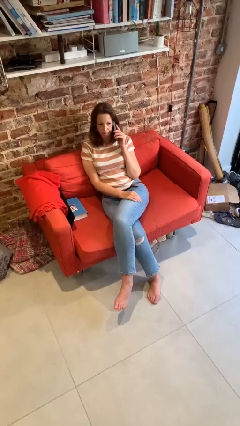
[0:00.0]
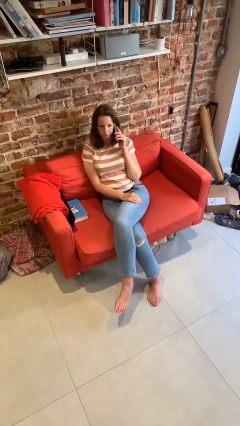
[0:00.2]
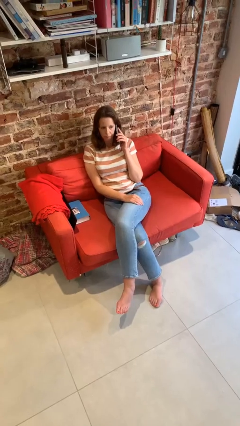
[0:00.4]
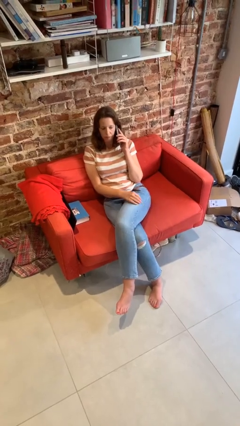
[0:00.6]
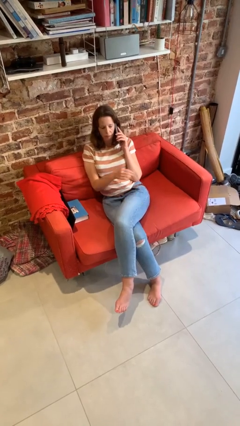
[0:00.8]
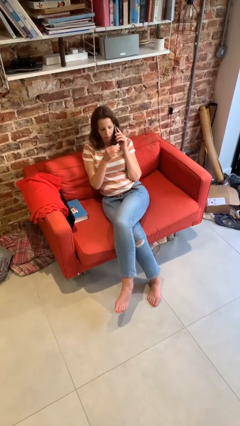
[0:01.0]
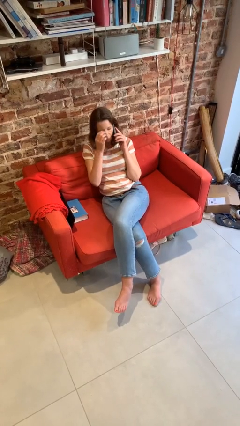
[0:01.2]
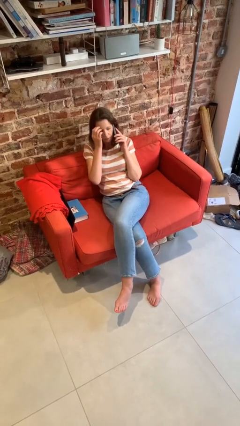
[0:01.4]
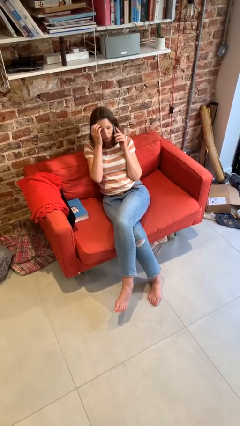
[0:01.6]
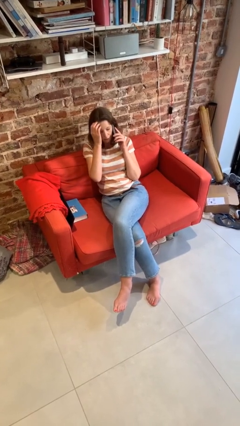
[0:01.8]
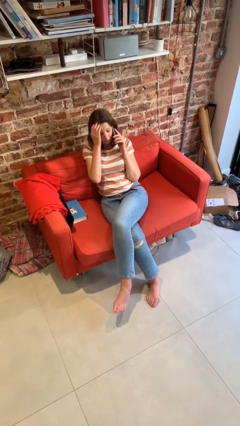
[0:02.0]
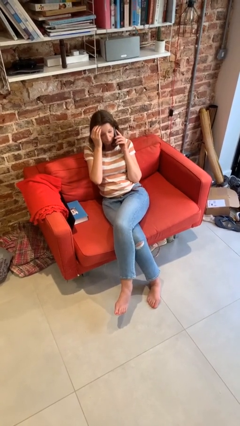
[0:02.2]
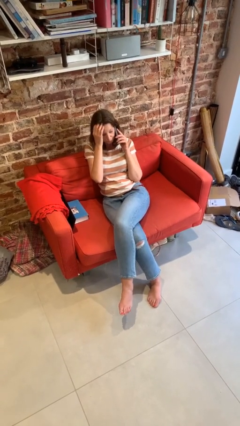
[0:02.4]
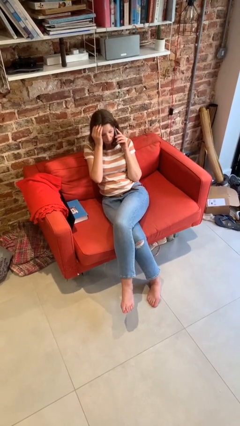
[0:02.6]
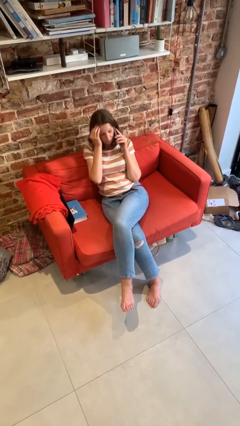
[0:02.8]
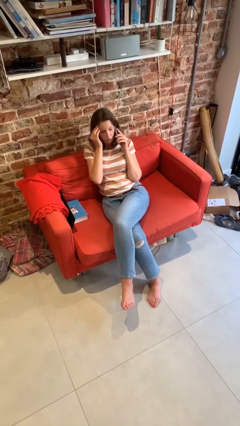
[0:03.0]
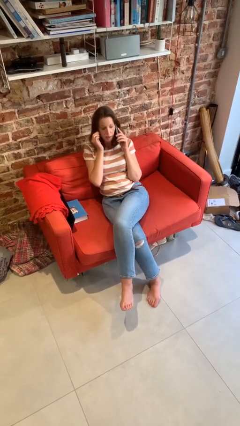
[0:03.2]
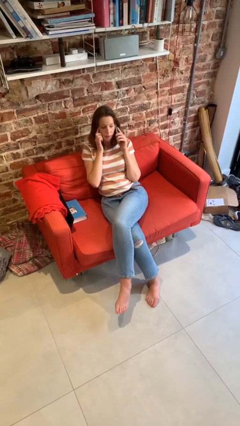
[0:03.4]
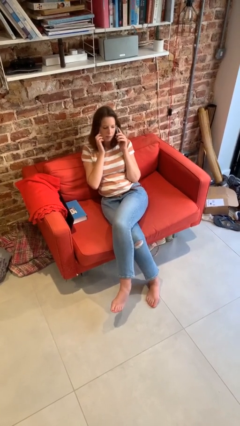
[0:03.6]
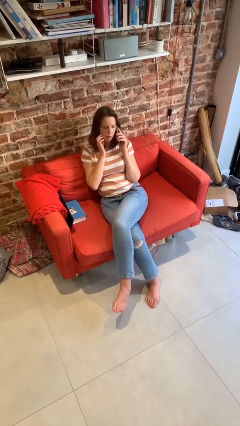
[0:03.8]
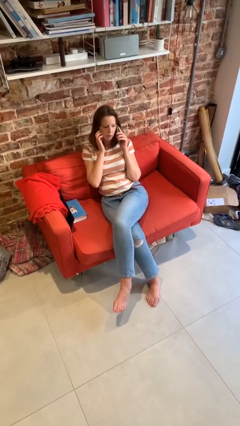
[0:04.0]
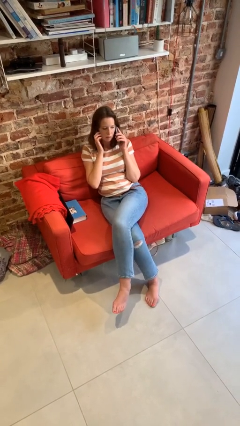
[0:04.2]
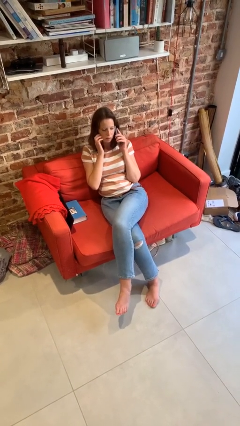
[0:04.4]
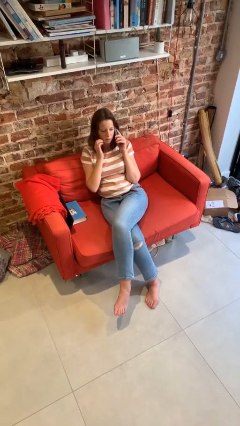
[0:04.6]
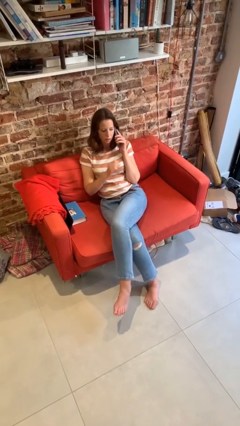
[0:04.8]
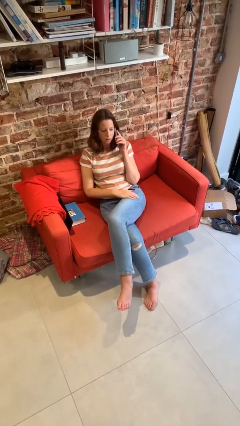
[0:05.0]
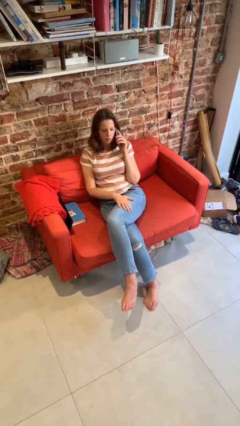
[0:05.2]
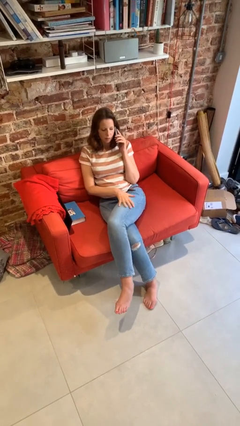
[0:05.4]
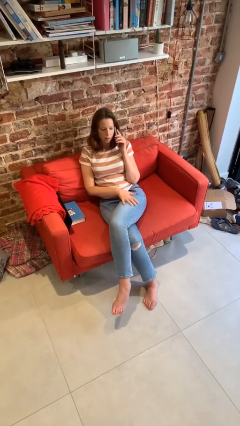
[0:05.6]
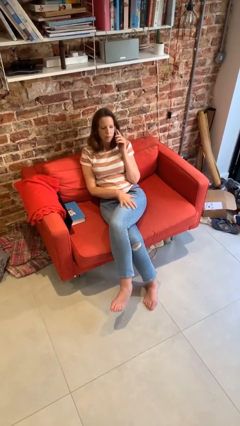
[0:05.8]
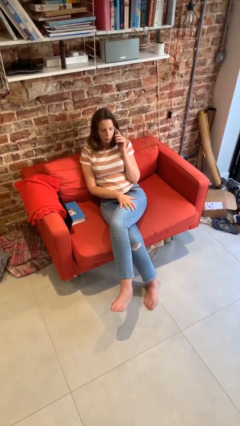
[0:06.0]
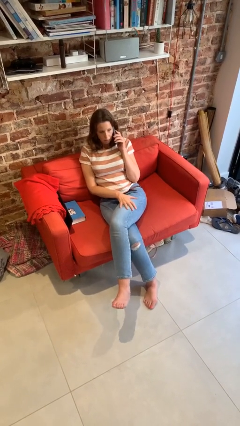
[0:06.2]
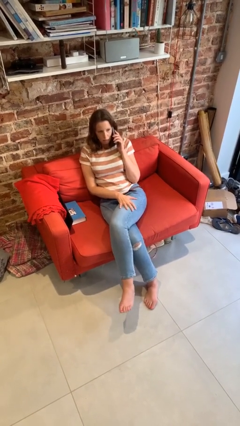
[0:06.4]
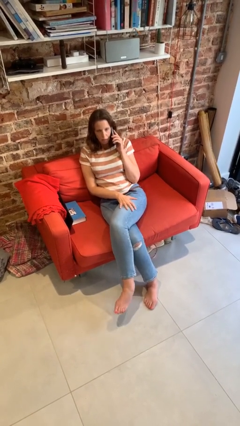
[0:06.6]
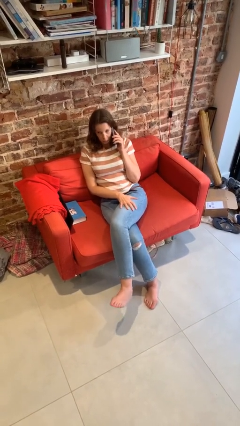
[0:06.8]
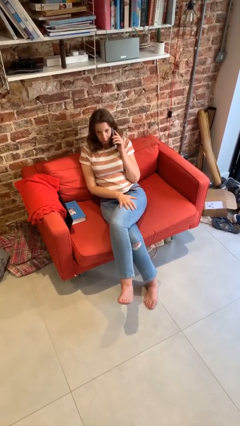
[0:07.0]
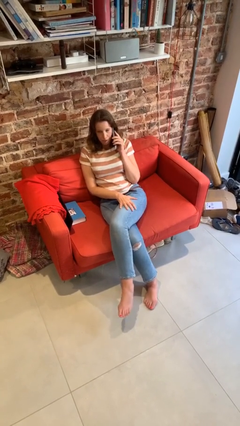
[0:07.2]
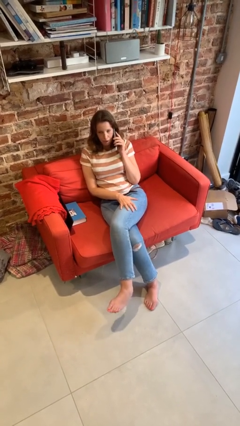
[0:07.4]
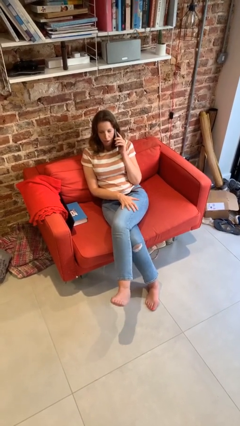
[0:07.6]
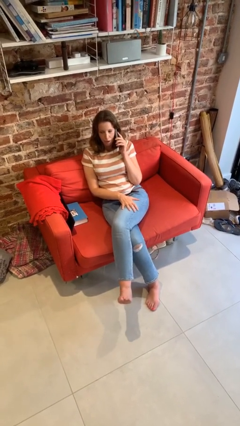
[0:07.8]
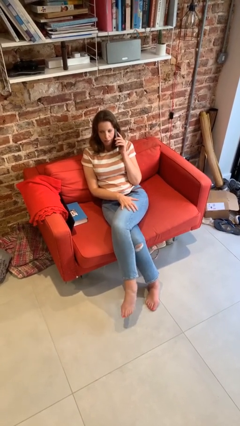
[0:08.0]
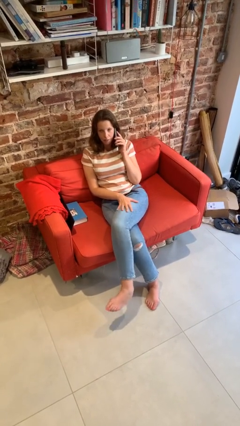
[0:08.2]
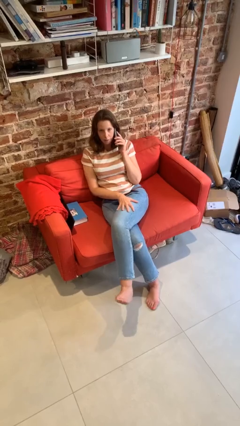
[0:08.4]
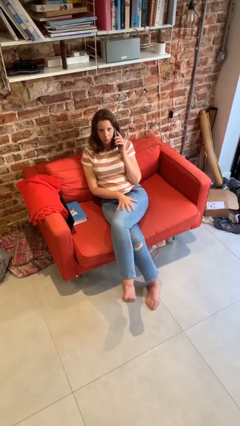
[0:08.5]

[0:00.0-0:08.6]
person talks on phone

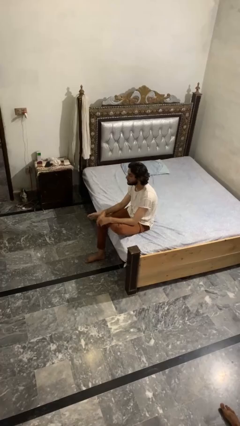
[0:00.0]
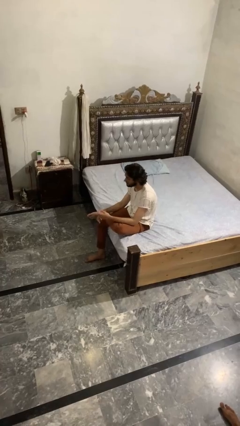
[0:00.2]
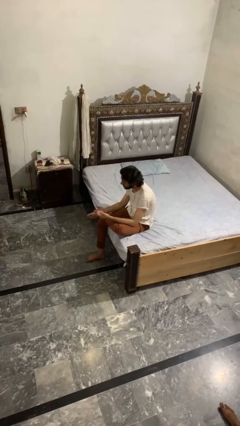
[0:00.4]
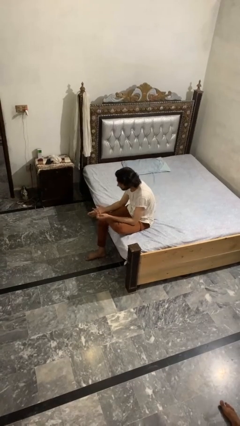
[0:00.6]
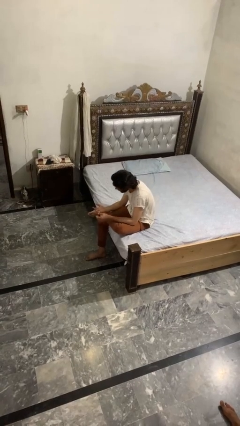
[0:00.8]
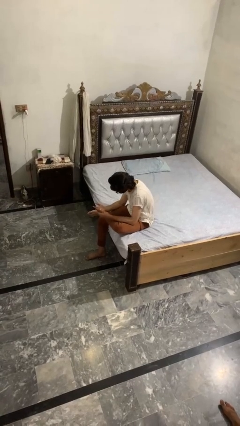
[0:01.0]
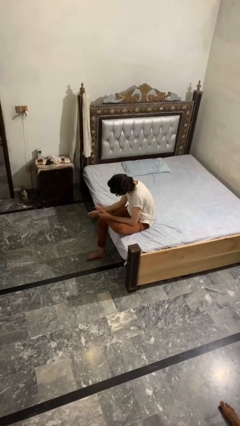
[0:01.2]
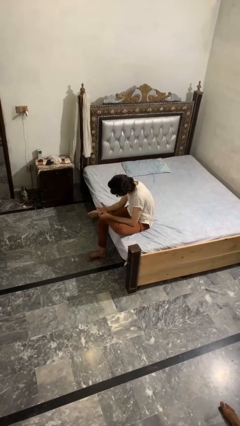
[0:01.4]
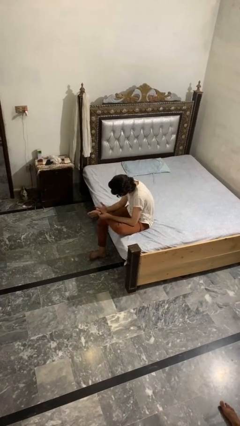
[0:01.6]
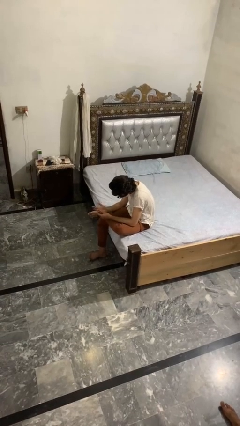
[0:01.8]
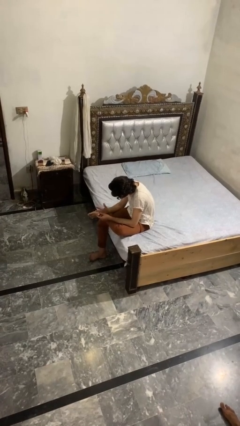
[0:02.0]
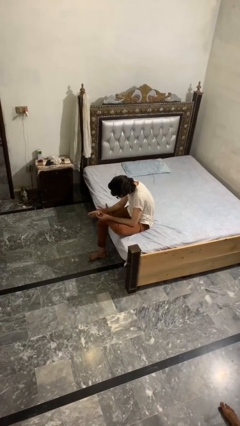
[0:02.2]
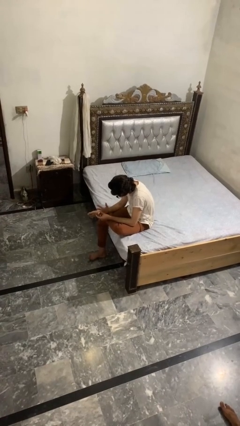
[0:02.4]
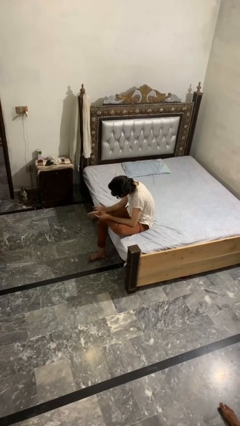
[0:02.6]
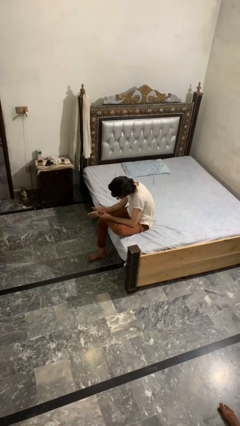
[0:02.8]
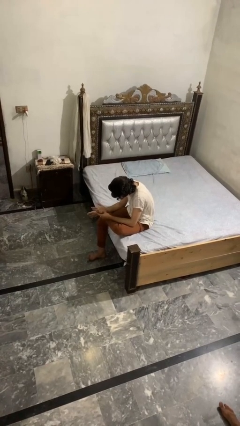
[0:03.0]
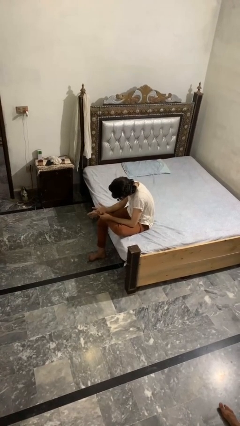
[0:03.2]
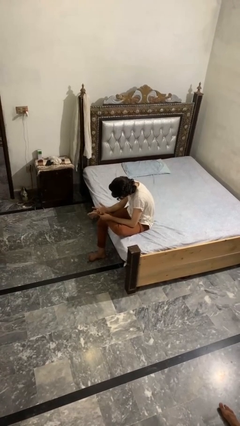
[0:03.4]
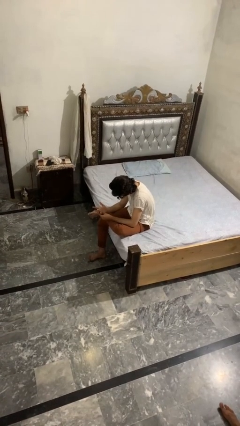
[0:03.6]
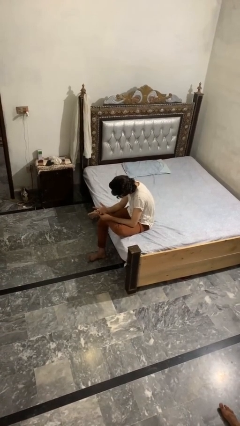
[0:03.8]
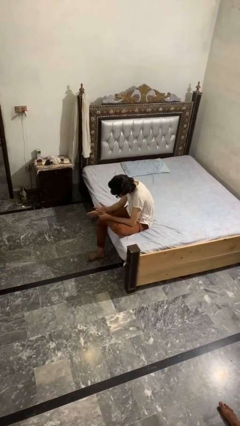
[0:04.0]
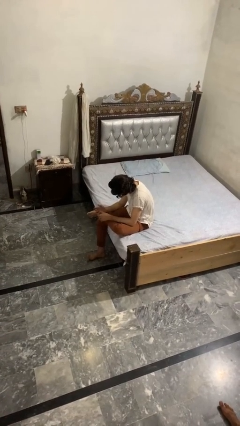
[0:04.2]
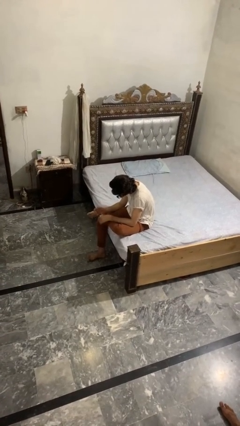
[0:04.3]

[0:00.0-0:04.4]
person looks at hands in lap

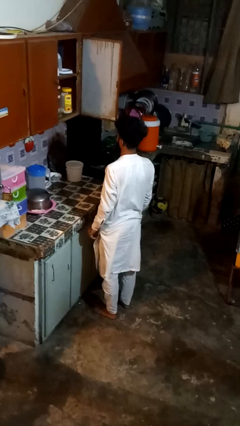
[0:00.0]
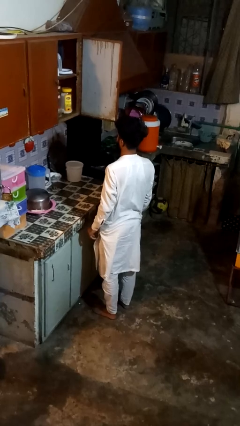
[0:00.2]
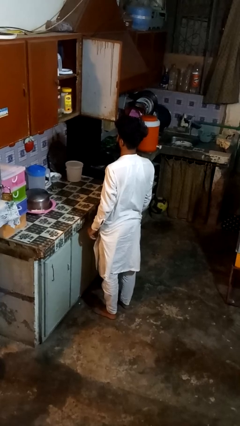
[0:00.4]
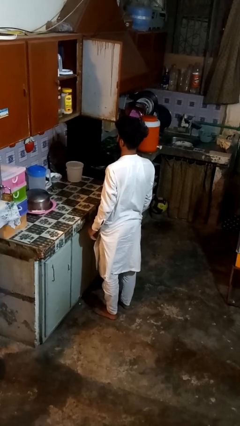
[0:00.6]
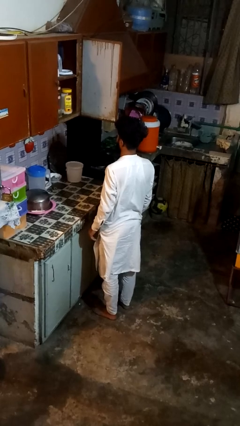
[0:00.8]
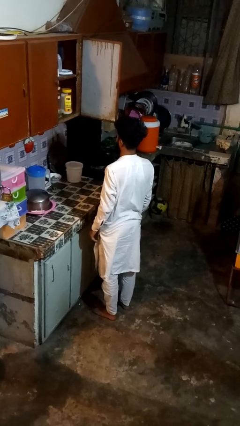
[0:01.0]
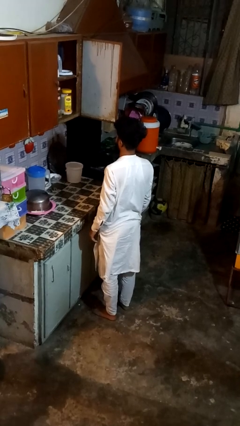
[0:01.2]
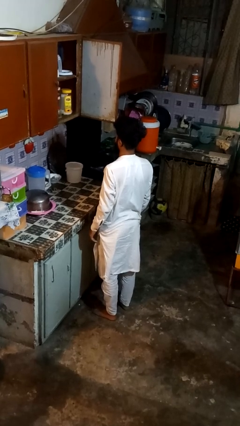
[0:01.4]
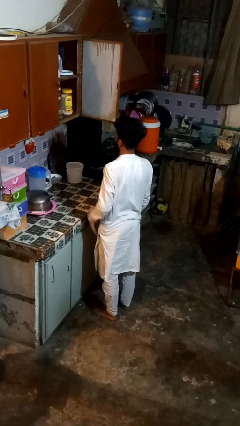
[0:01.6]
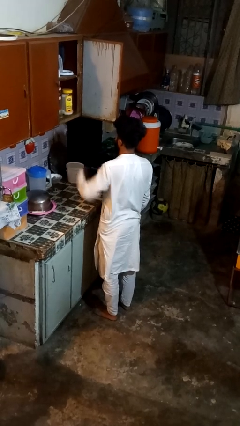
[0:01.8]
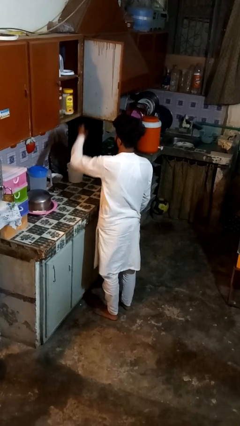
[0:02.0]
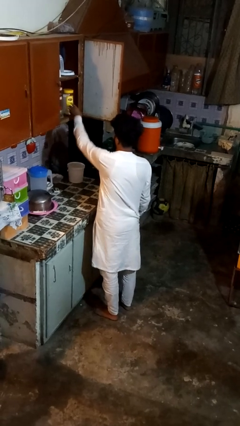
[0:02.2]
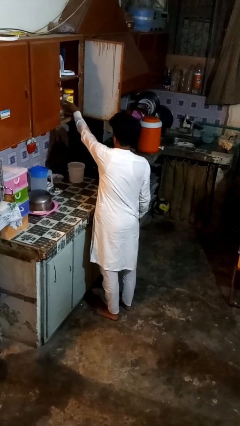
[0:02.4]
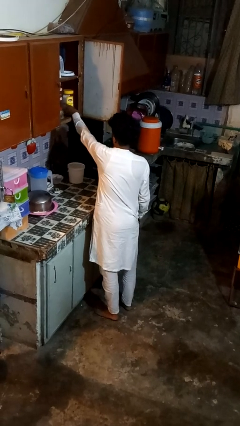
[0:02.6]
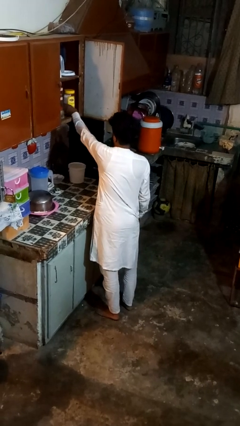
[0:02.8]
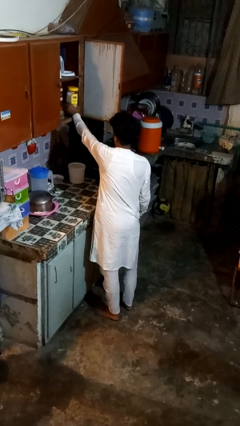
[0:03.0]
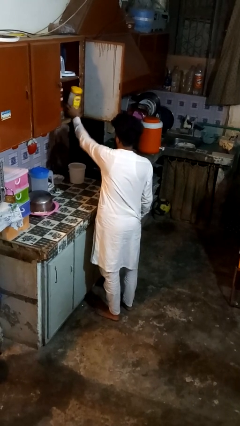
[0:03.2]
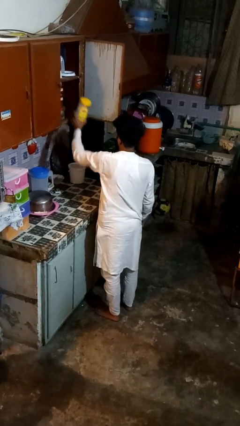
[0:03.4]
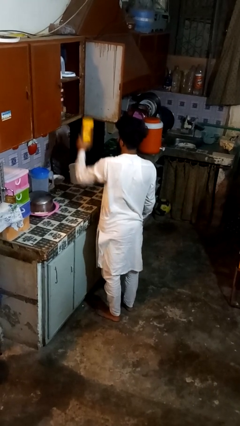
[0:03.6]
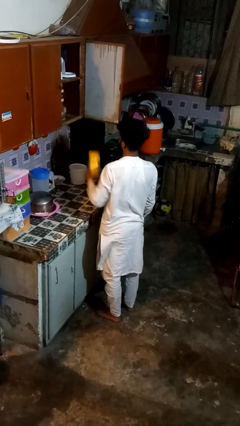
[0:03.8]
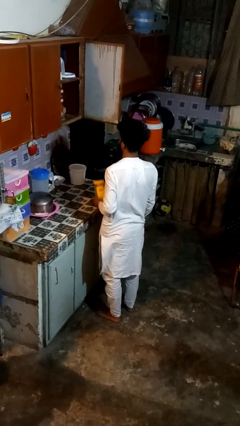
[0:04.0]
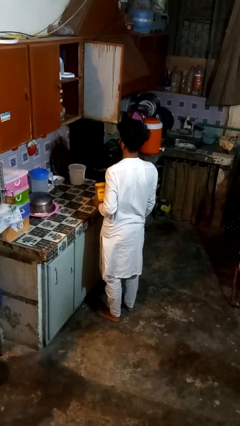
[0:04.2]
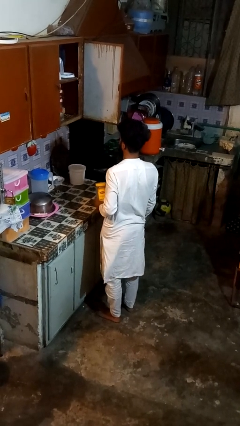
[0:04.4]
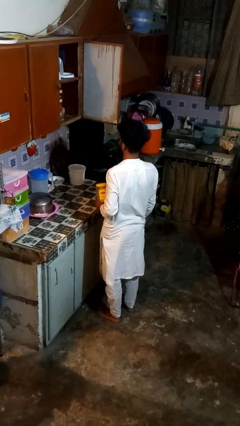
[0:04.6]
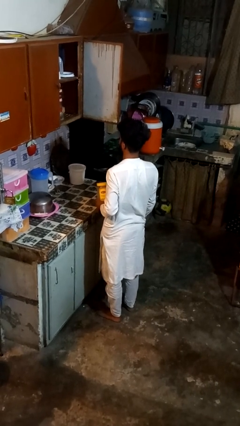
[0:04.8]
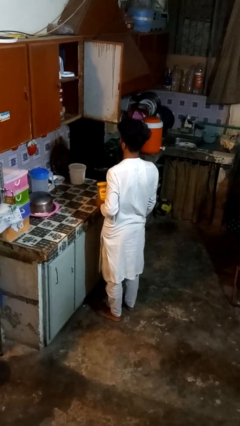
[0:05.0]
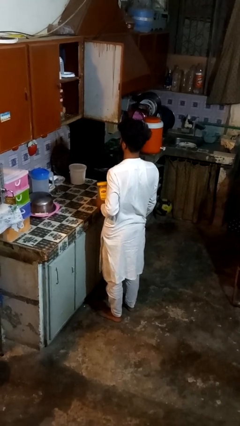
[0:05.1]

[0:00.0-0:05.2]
person puts object in cabinet
